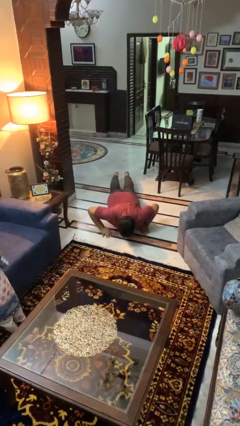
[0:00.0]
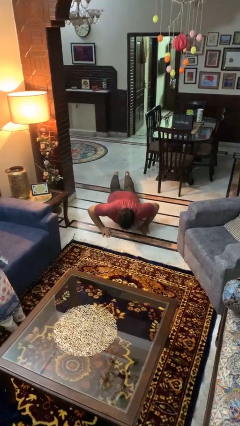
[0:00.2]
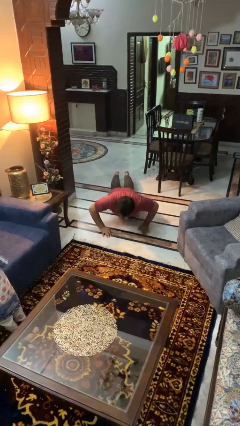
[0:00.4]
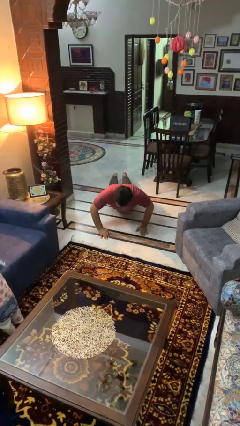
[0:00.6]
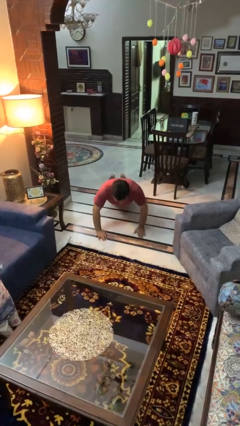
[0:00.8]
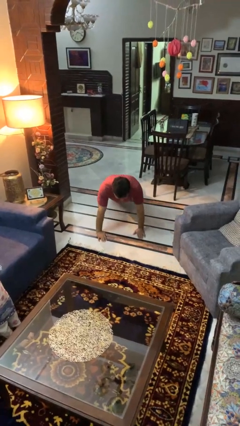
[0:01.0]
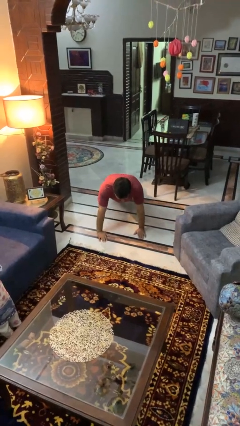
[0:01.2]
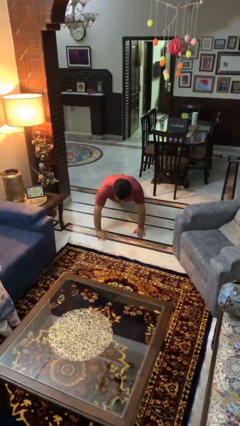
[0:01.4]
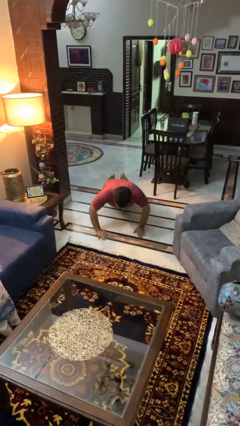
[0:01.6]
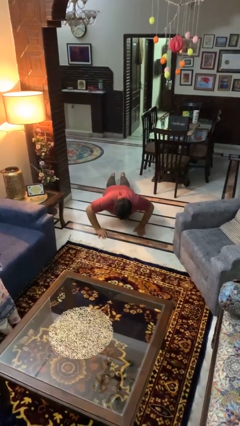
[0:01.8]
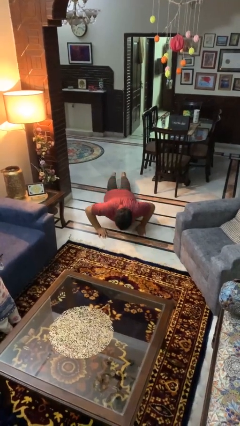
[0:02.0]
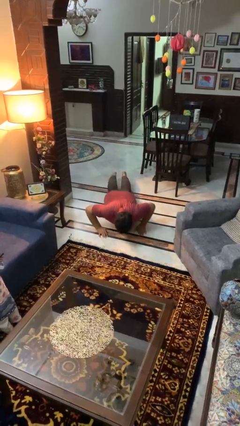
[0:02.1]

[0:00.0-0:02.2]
person exercises with pushup

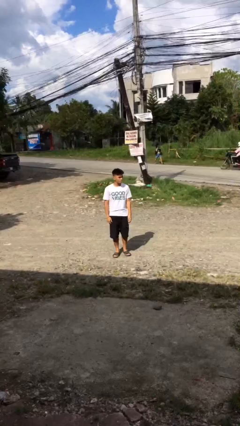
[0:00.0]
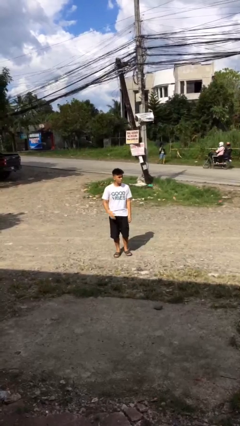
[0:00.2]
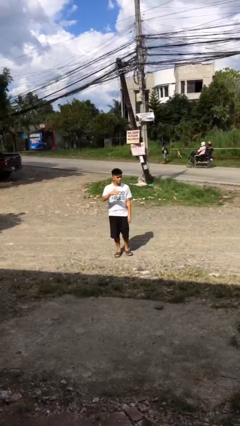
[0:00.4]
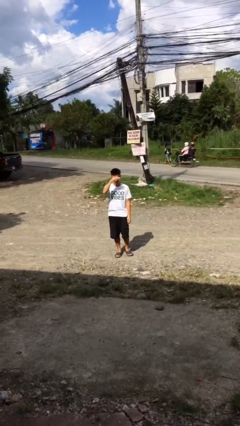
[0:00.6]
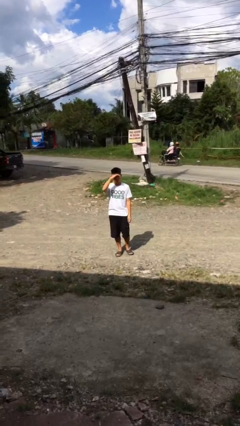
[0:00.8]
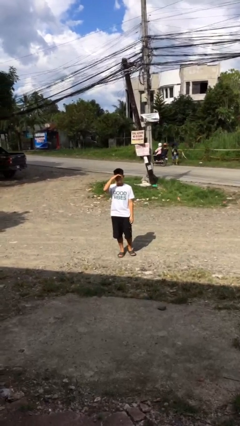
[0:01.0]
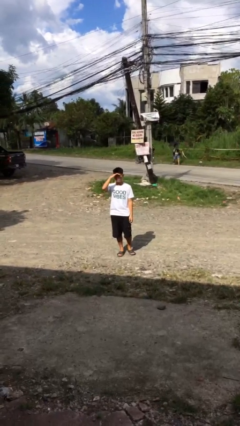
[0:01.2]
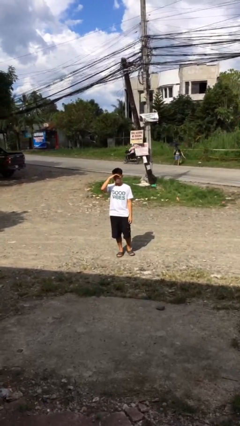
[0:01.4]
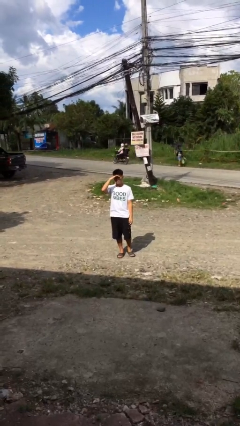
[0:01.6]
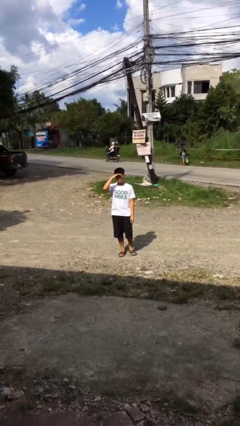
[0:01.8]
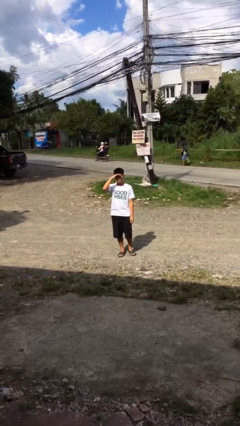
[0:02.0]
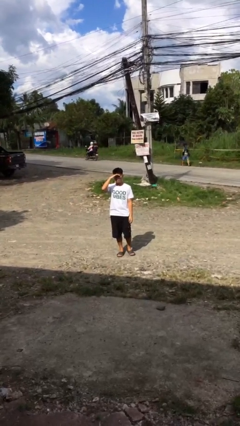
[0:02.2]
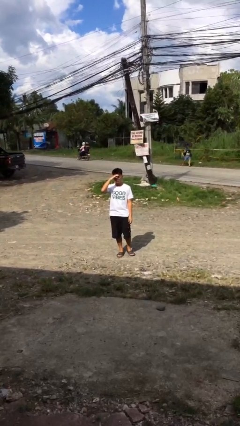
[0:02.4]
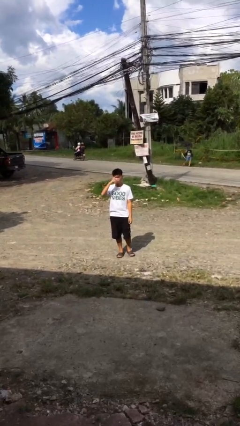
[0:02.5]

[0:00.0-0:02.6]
person shades eyes

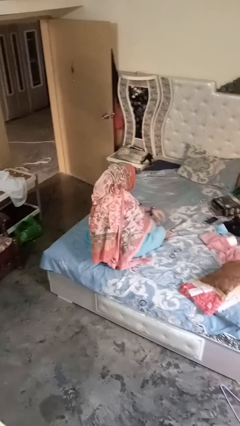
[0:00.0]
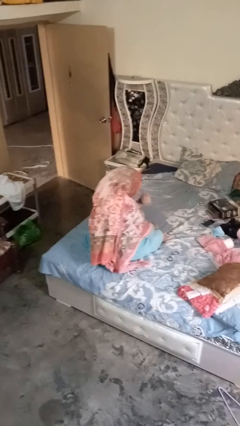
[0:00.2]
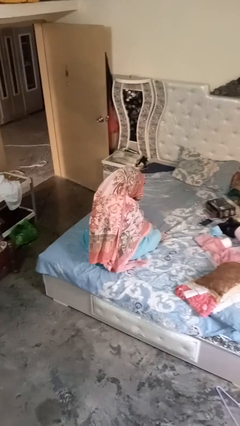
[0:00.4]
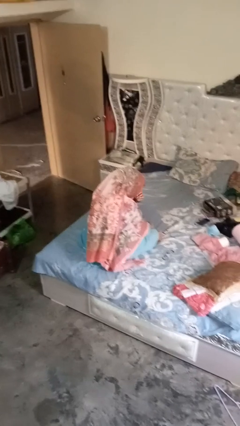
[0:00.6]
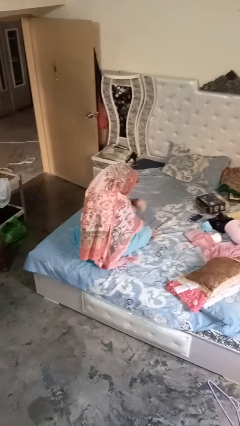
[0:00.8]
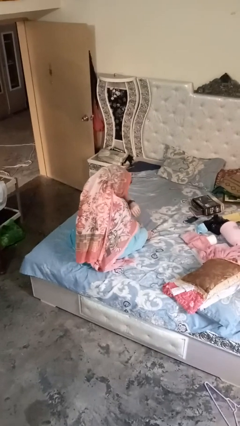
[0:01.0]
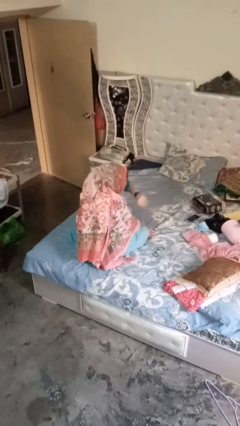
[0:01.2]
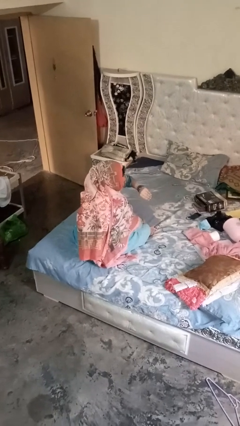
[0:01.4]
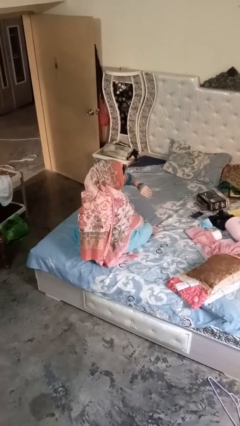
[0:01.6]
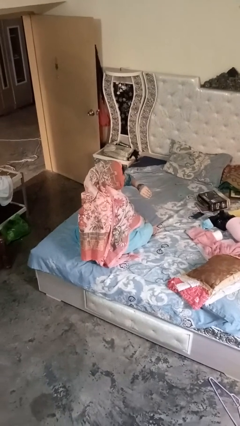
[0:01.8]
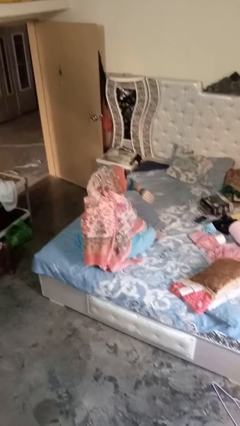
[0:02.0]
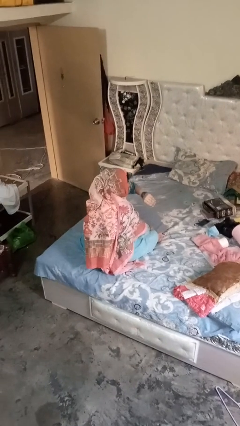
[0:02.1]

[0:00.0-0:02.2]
person gestures watch closely

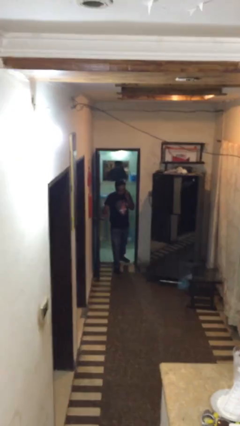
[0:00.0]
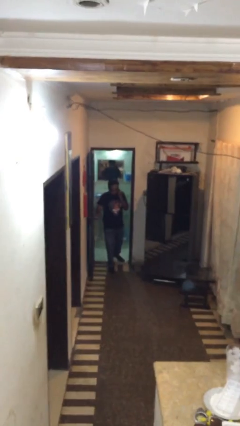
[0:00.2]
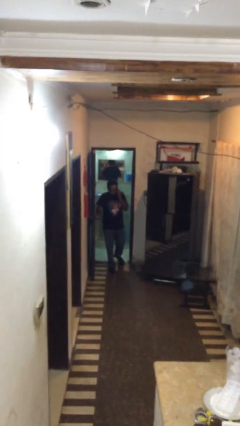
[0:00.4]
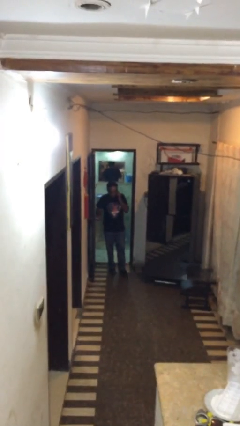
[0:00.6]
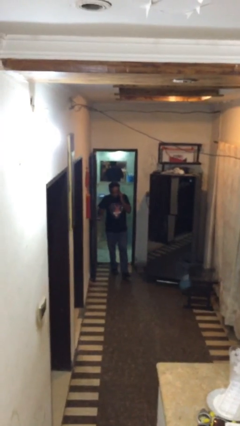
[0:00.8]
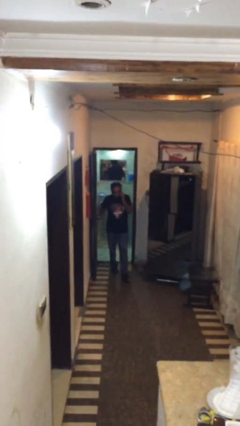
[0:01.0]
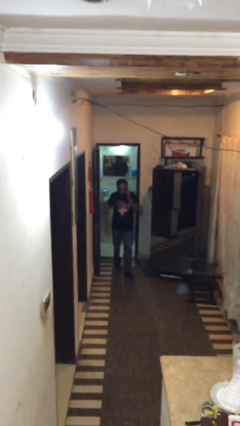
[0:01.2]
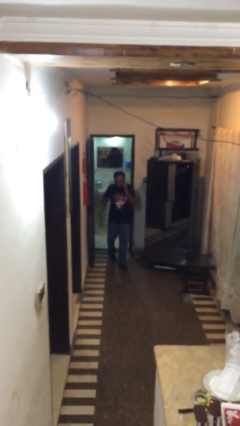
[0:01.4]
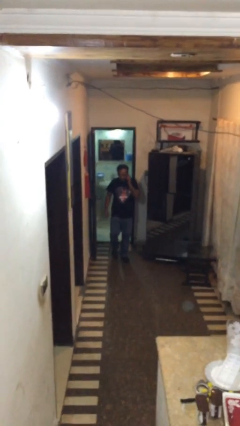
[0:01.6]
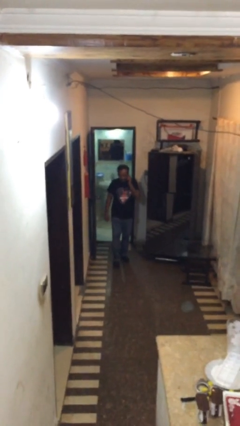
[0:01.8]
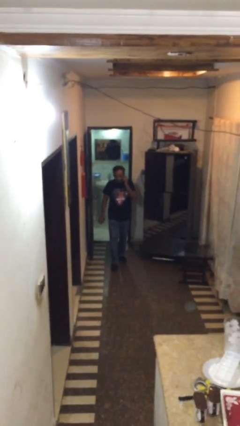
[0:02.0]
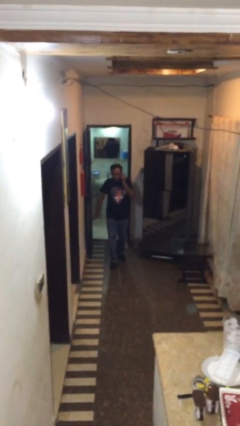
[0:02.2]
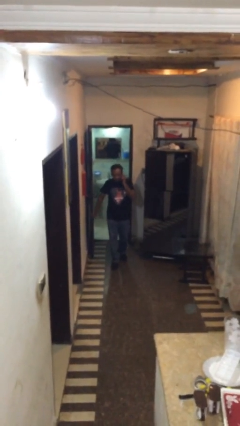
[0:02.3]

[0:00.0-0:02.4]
person enters scene through structure

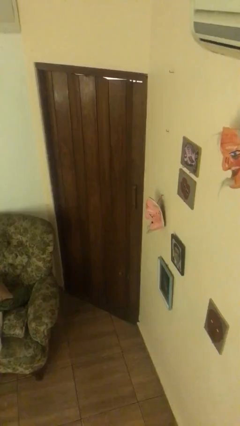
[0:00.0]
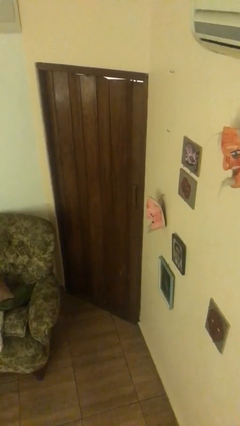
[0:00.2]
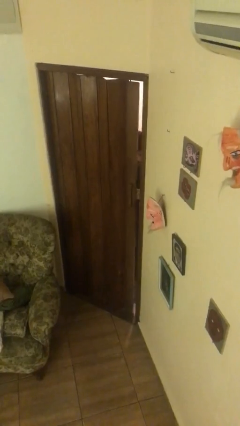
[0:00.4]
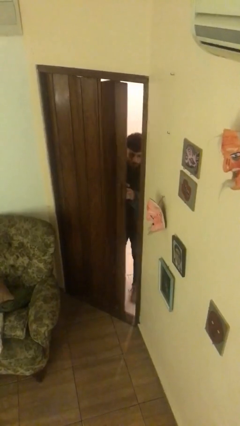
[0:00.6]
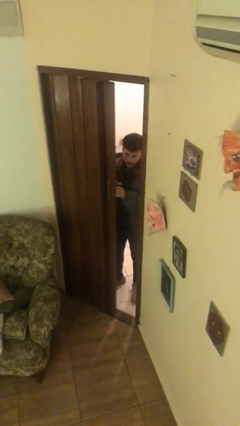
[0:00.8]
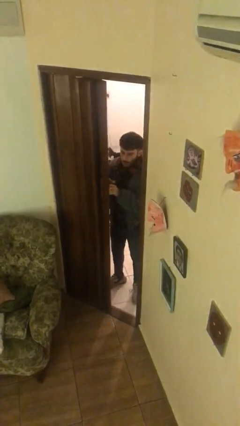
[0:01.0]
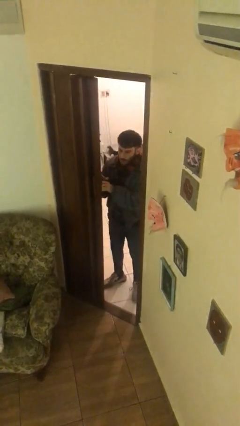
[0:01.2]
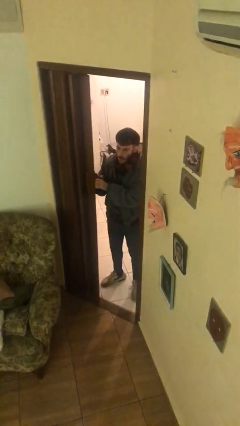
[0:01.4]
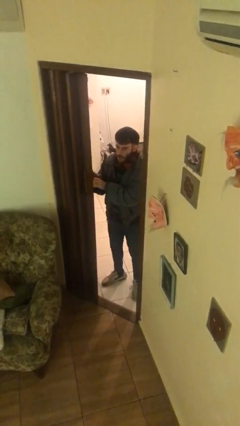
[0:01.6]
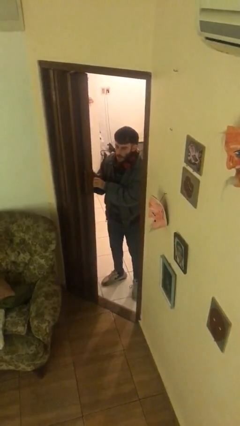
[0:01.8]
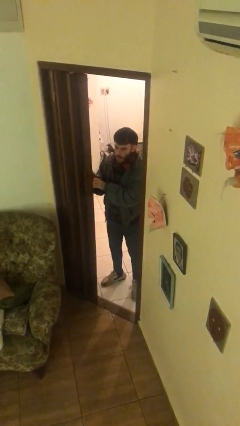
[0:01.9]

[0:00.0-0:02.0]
person opens sliding door

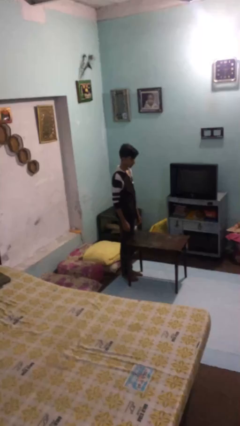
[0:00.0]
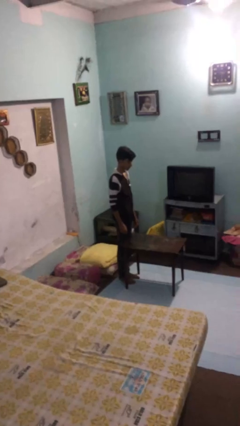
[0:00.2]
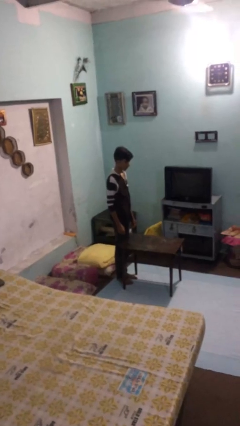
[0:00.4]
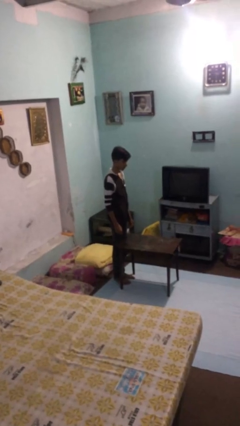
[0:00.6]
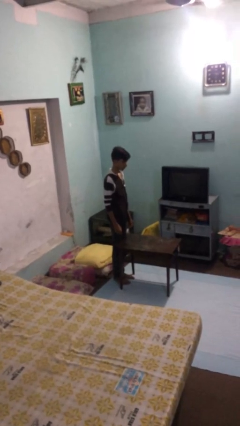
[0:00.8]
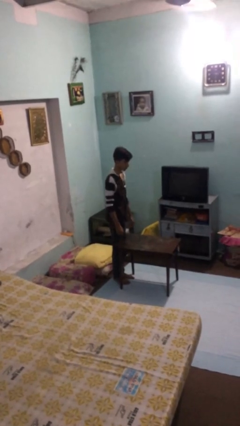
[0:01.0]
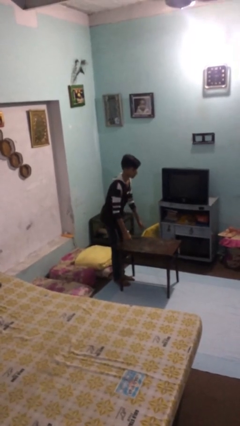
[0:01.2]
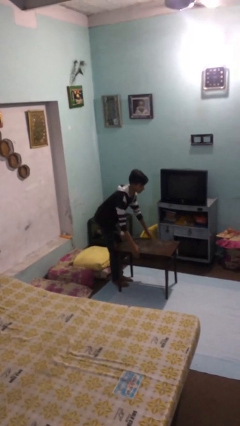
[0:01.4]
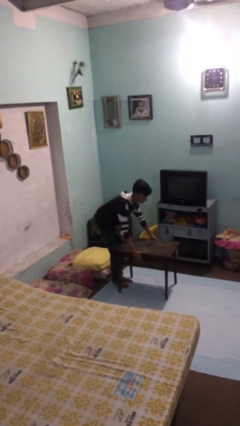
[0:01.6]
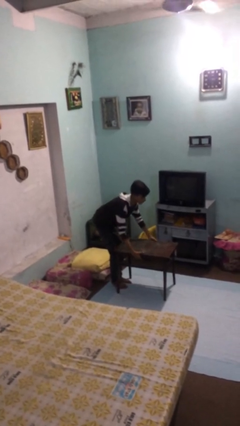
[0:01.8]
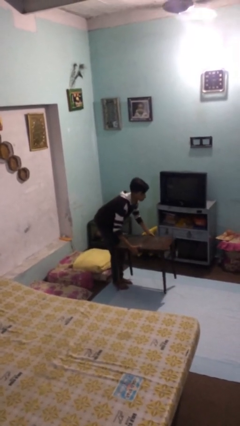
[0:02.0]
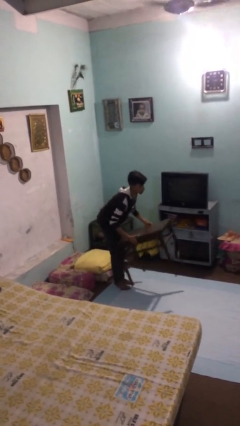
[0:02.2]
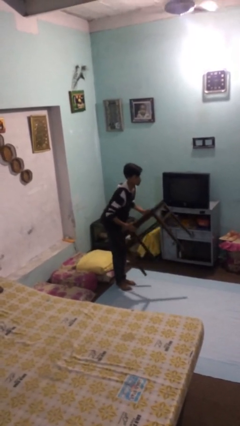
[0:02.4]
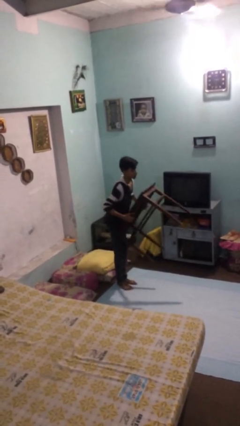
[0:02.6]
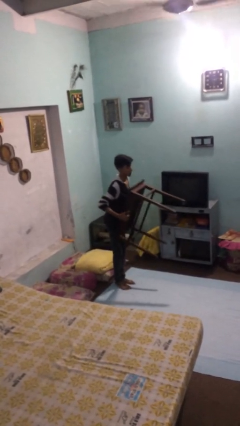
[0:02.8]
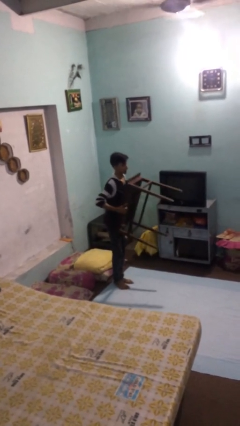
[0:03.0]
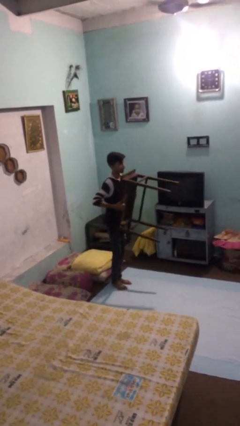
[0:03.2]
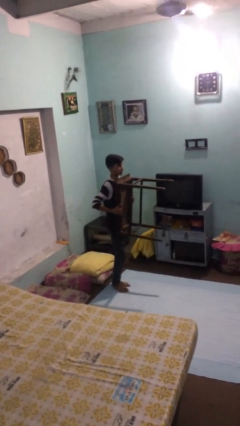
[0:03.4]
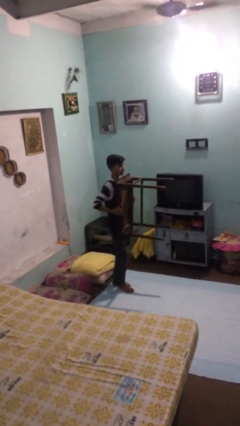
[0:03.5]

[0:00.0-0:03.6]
person picks up object from floor

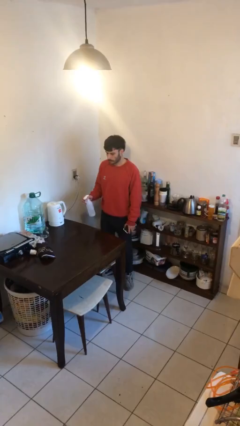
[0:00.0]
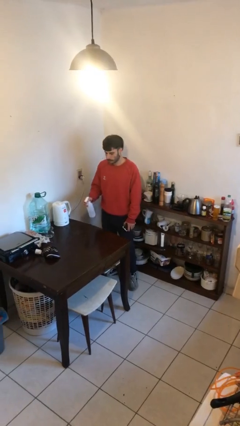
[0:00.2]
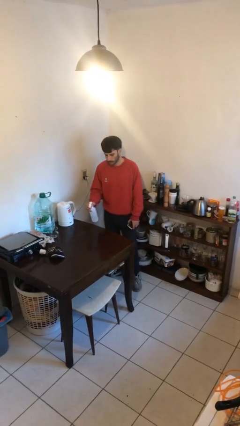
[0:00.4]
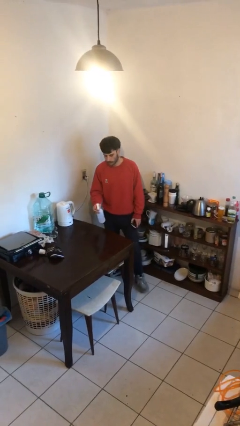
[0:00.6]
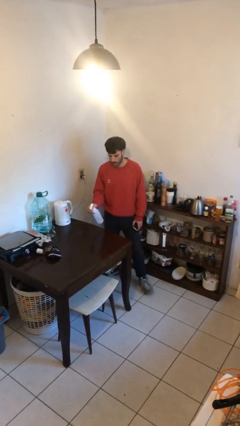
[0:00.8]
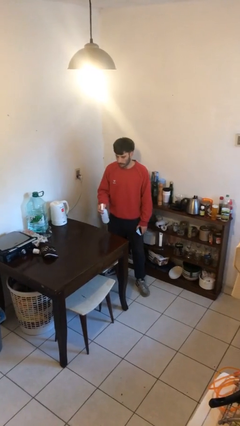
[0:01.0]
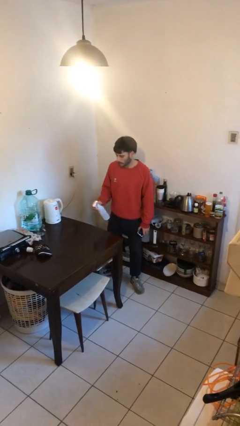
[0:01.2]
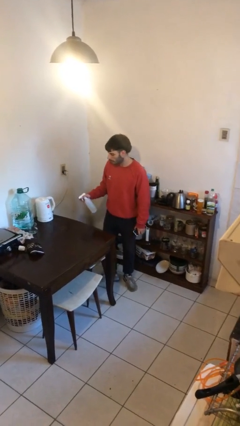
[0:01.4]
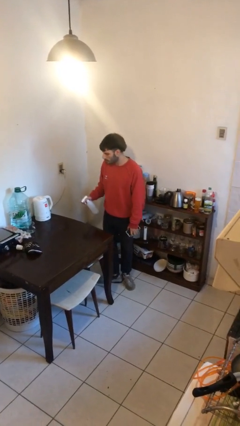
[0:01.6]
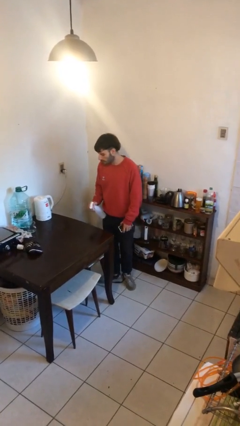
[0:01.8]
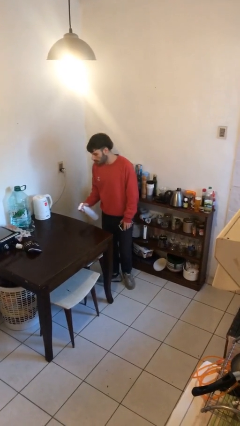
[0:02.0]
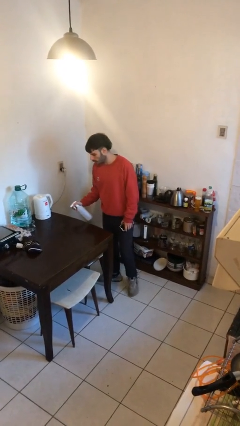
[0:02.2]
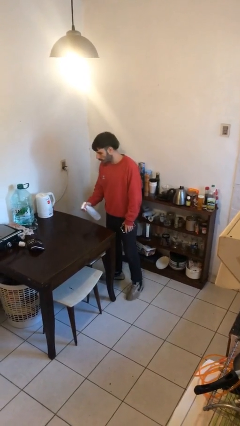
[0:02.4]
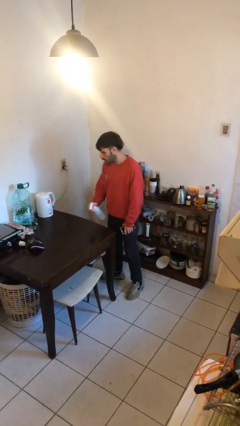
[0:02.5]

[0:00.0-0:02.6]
person sprays from bottle
